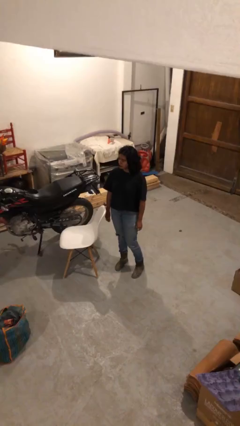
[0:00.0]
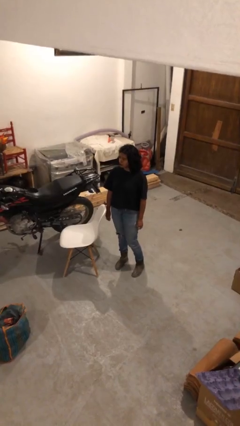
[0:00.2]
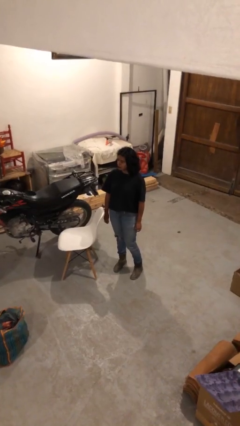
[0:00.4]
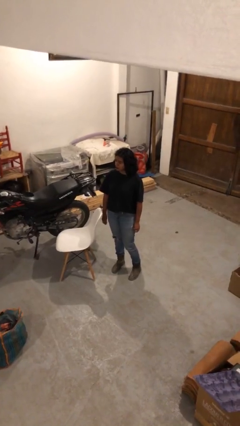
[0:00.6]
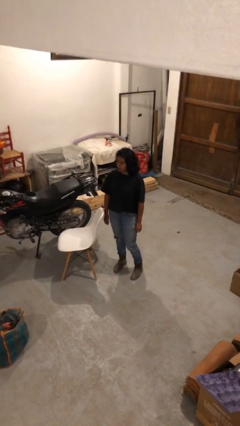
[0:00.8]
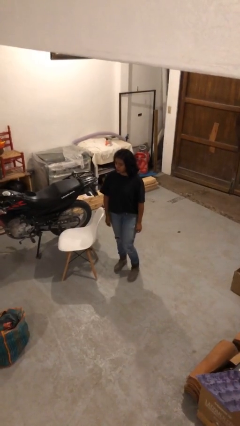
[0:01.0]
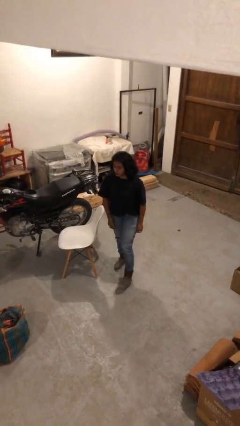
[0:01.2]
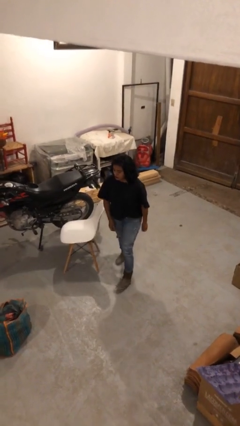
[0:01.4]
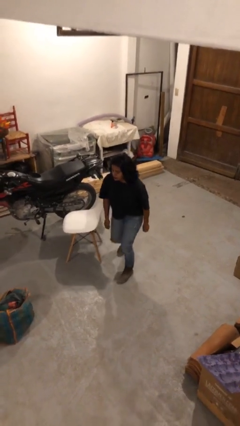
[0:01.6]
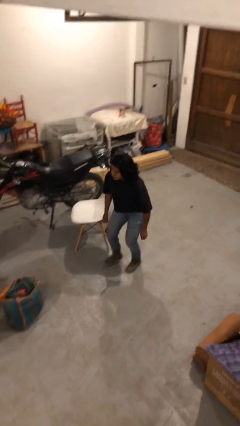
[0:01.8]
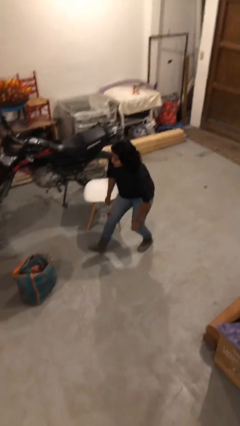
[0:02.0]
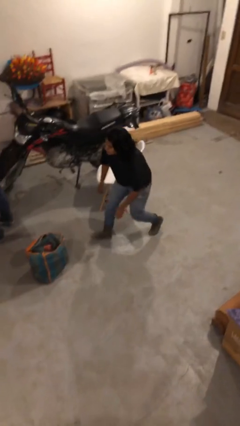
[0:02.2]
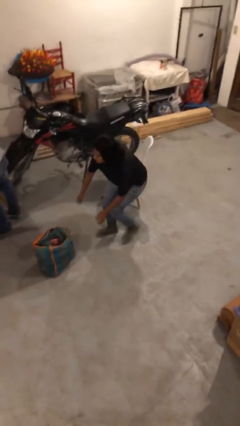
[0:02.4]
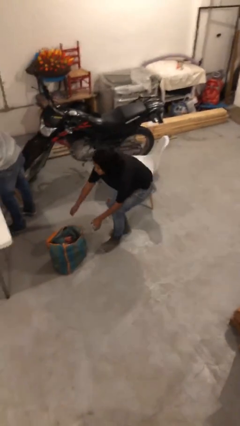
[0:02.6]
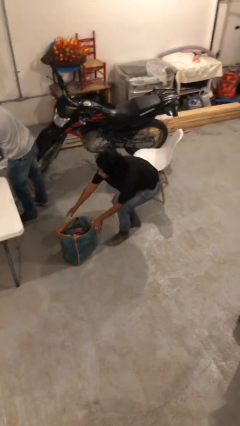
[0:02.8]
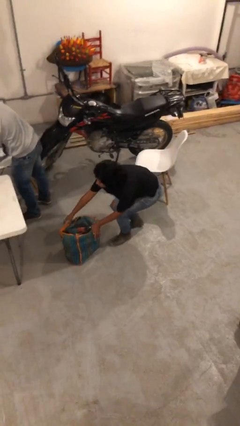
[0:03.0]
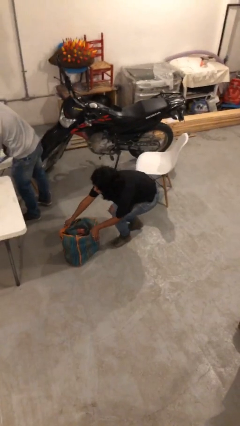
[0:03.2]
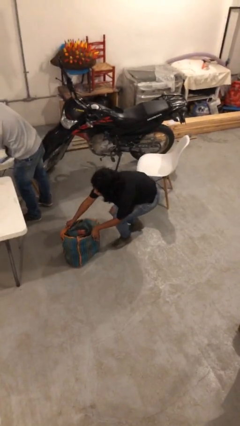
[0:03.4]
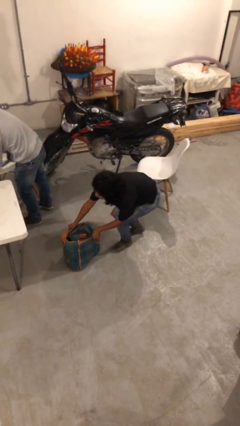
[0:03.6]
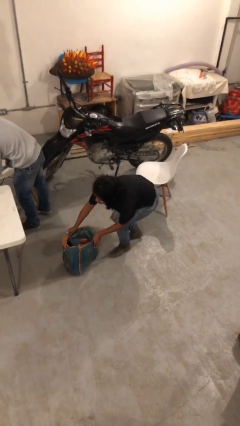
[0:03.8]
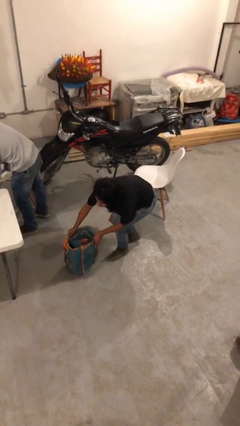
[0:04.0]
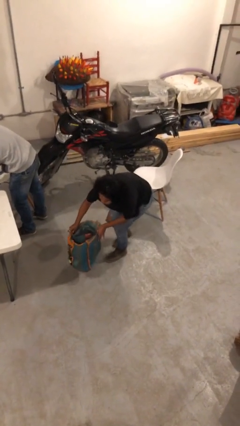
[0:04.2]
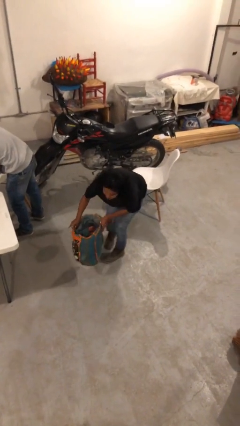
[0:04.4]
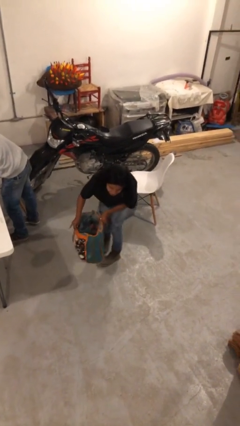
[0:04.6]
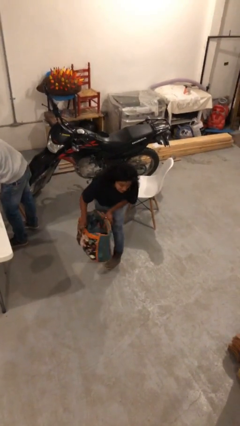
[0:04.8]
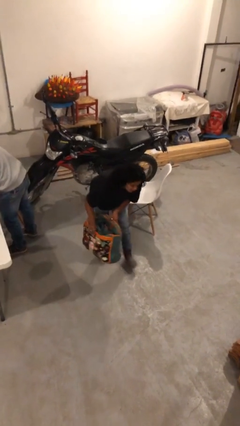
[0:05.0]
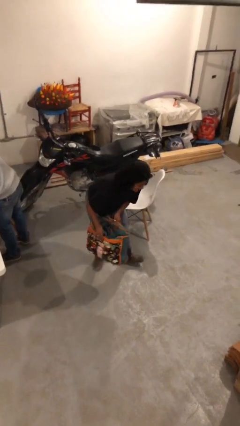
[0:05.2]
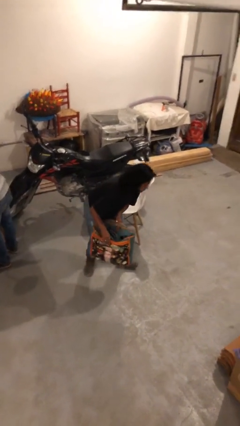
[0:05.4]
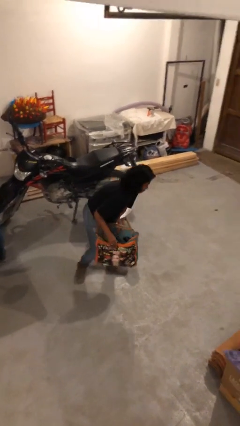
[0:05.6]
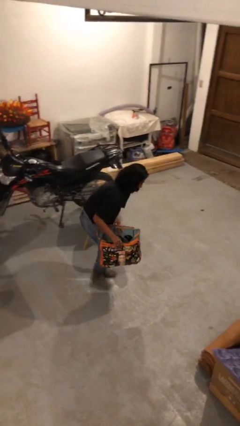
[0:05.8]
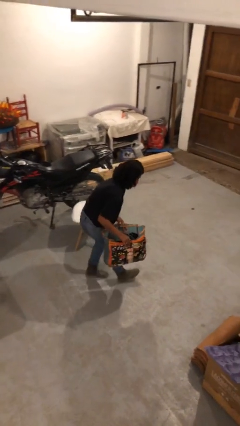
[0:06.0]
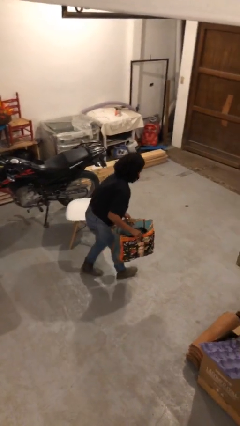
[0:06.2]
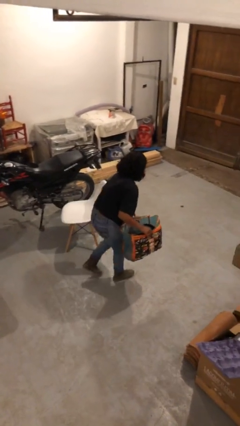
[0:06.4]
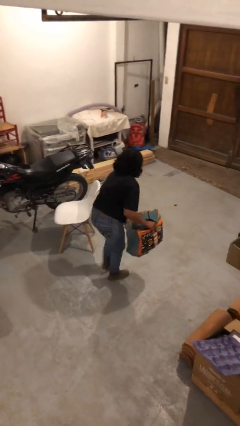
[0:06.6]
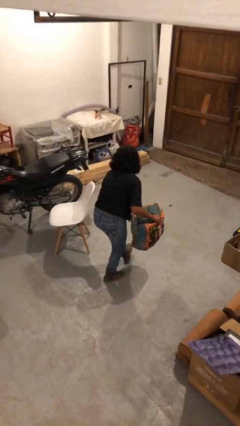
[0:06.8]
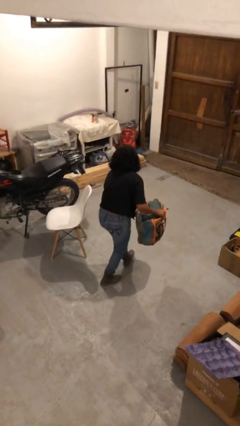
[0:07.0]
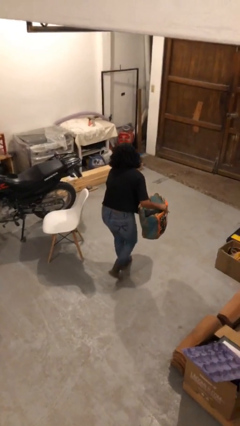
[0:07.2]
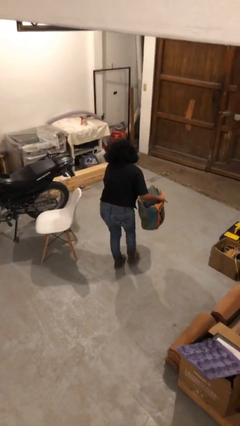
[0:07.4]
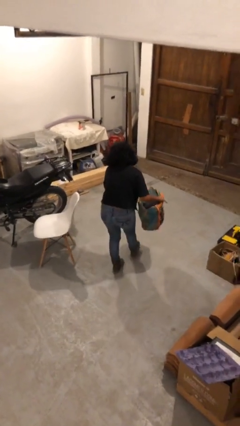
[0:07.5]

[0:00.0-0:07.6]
person steals object from person

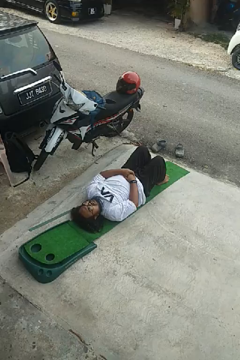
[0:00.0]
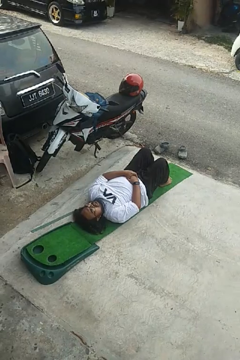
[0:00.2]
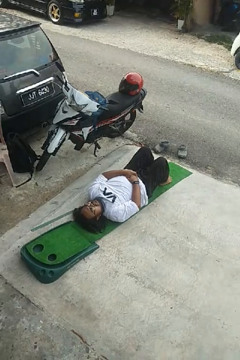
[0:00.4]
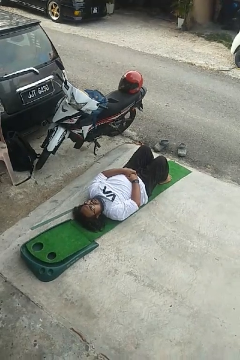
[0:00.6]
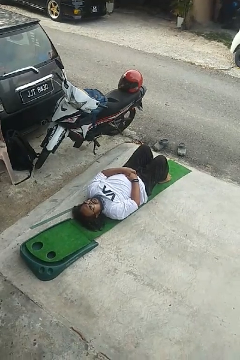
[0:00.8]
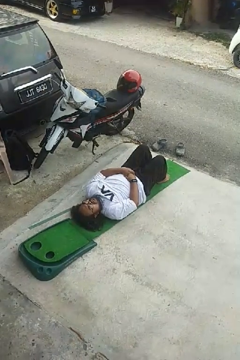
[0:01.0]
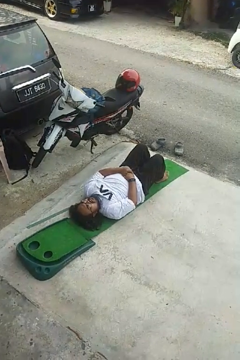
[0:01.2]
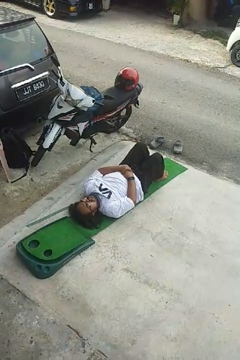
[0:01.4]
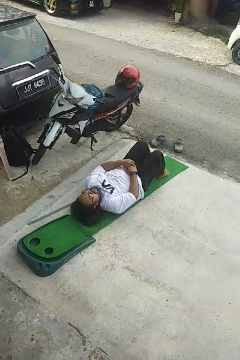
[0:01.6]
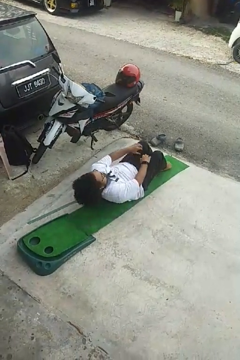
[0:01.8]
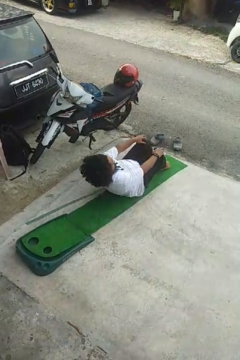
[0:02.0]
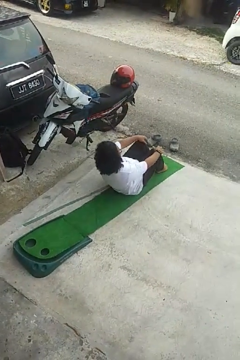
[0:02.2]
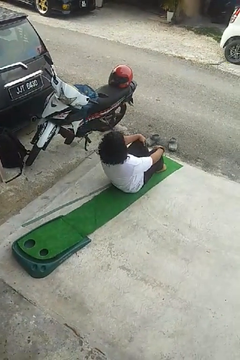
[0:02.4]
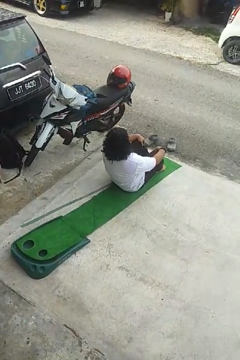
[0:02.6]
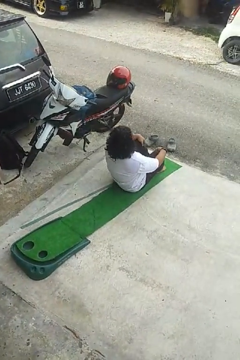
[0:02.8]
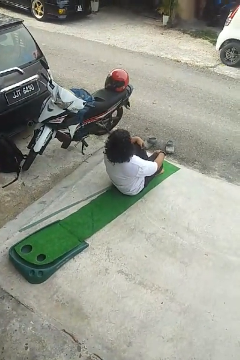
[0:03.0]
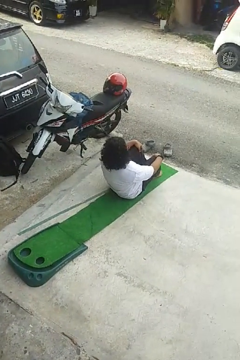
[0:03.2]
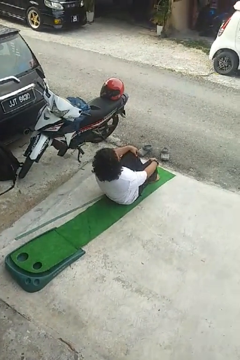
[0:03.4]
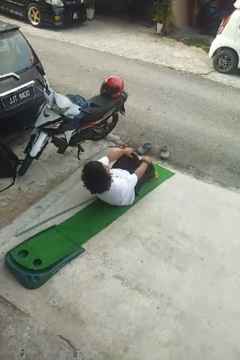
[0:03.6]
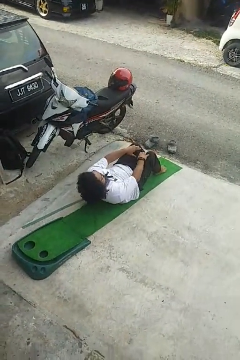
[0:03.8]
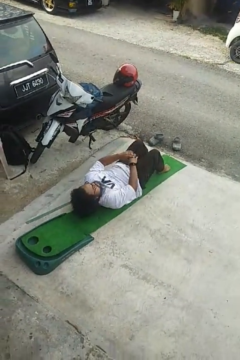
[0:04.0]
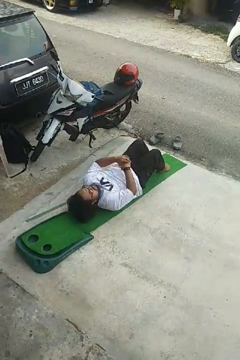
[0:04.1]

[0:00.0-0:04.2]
person exercises with situp

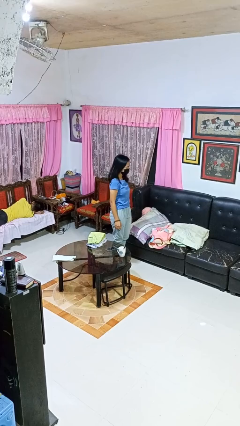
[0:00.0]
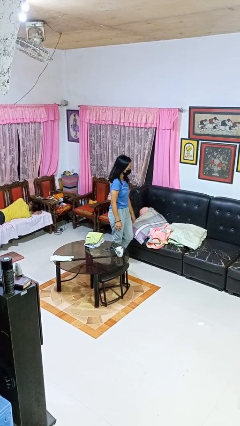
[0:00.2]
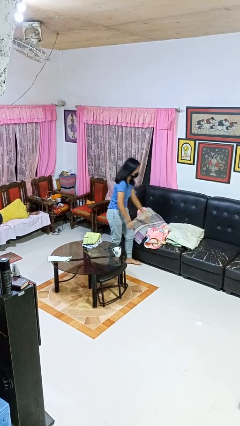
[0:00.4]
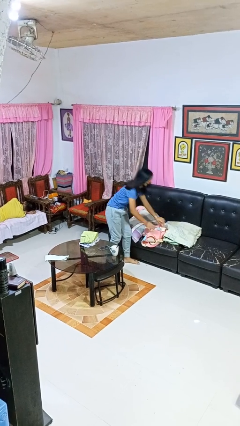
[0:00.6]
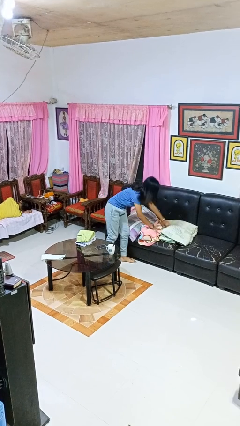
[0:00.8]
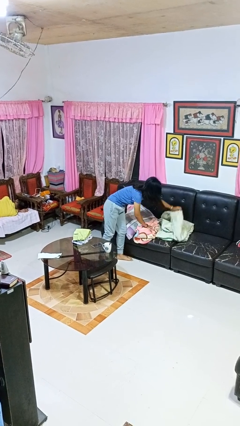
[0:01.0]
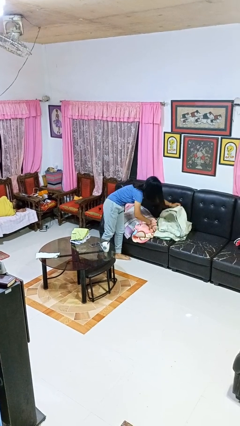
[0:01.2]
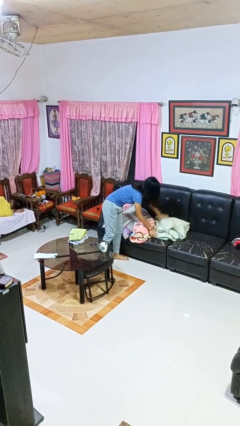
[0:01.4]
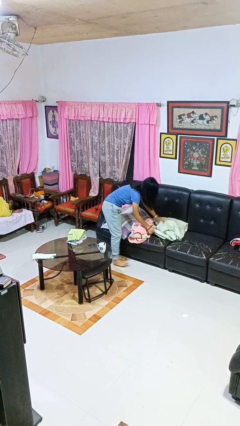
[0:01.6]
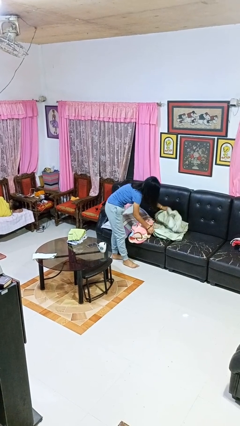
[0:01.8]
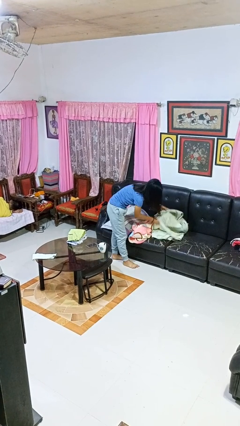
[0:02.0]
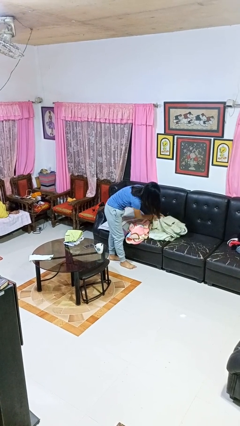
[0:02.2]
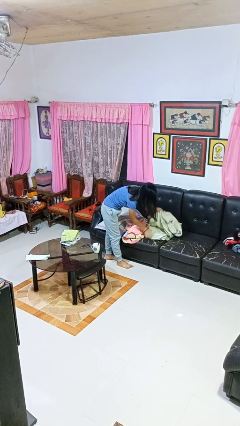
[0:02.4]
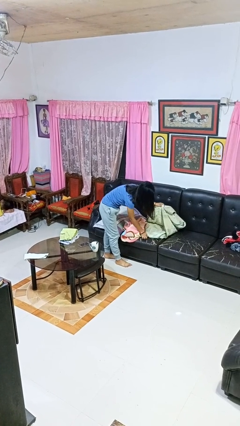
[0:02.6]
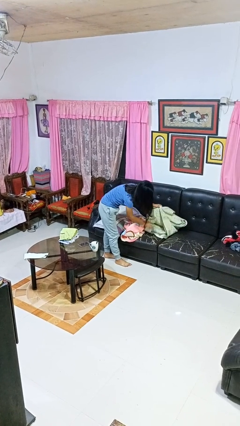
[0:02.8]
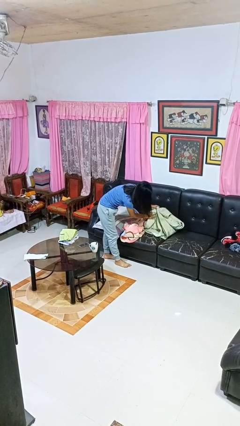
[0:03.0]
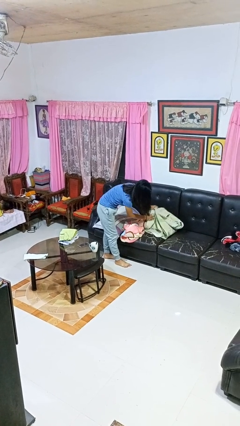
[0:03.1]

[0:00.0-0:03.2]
person searches in couch

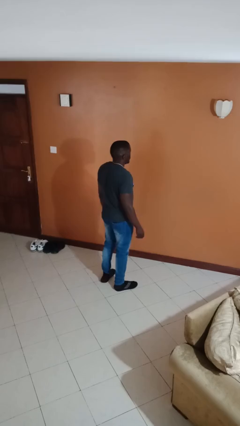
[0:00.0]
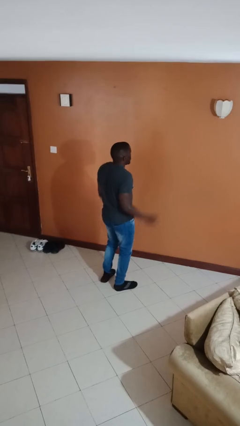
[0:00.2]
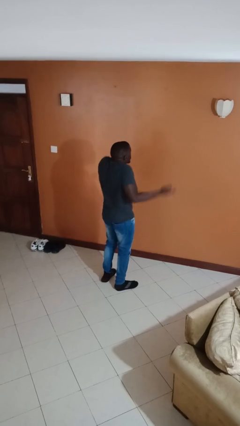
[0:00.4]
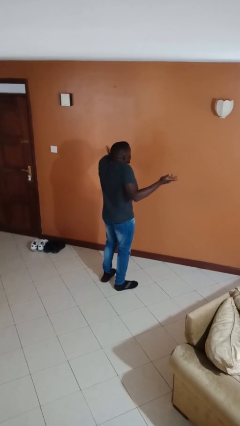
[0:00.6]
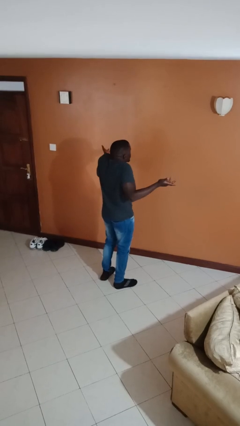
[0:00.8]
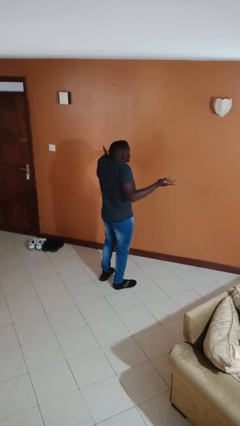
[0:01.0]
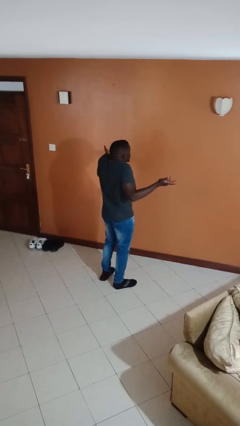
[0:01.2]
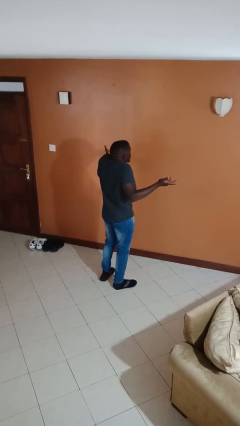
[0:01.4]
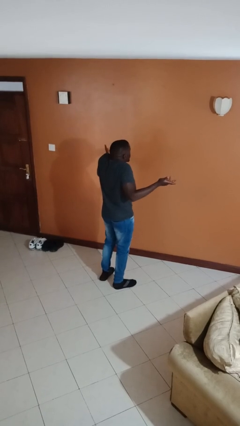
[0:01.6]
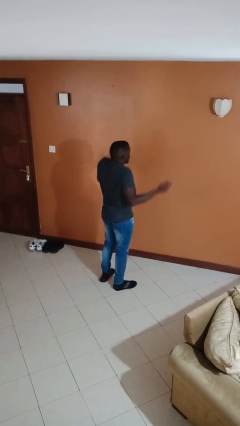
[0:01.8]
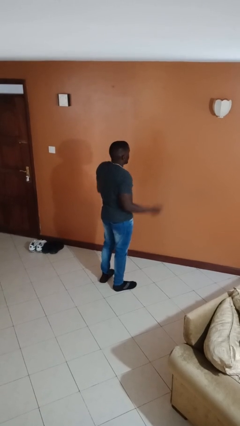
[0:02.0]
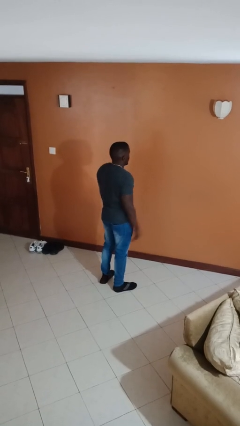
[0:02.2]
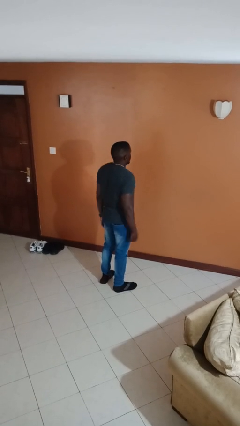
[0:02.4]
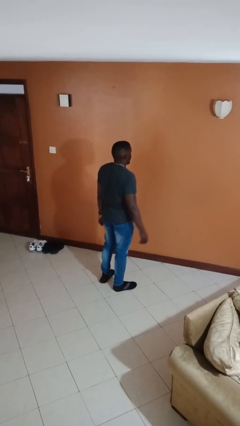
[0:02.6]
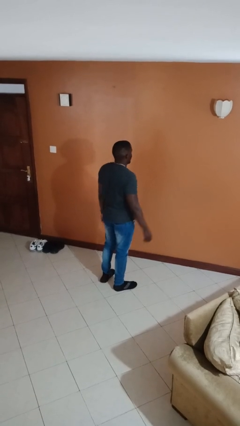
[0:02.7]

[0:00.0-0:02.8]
person shrugs

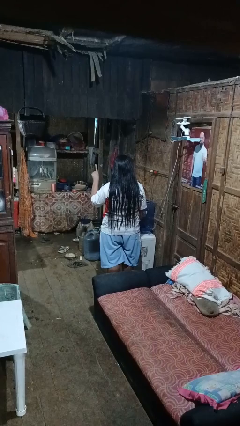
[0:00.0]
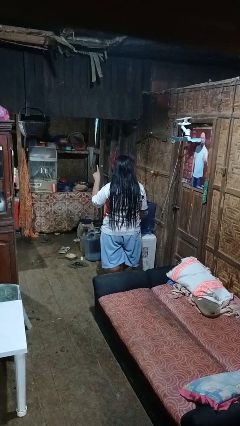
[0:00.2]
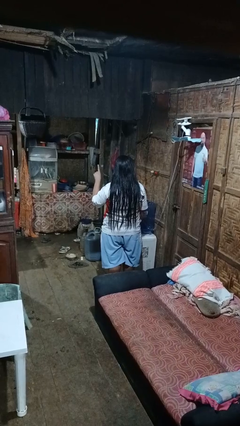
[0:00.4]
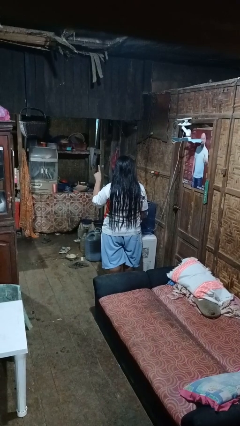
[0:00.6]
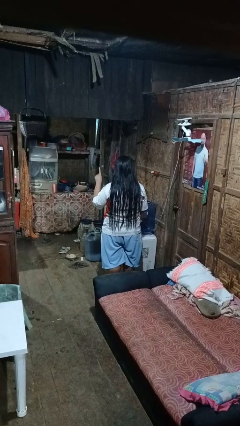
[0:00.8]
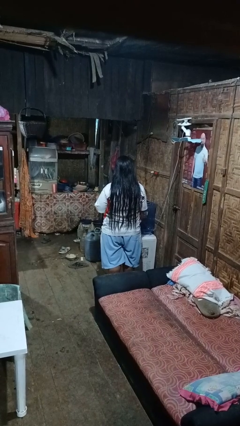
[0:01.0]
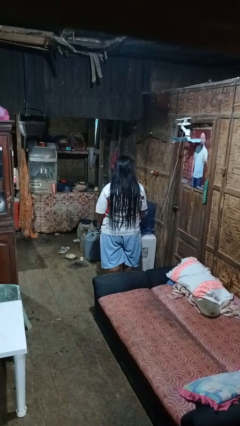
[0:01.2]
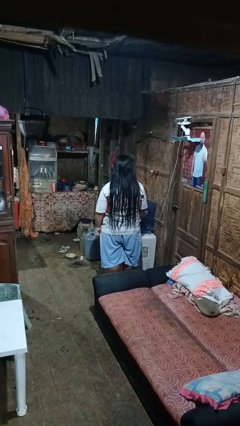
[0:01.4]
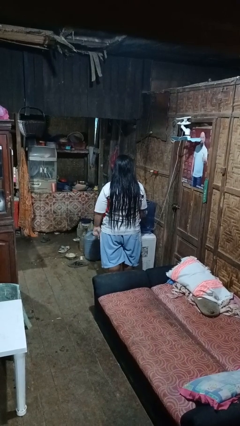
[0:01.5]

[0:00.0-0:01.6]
person gestures number one
